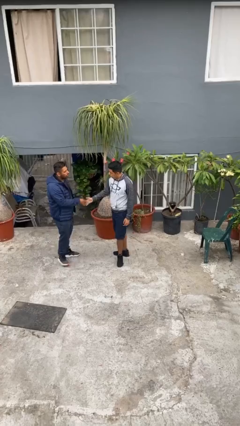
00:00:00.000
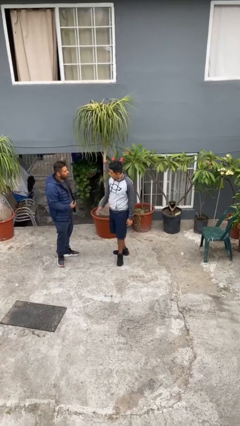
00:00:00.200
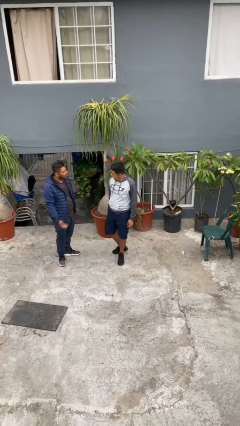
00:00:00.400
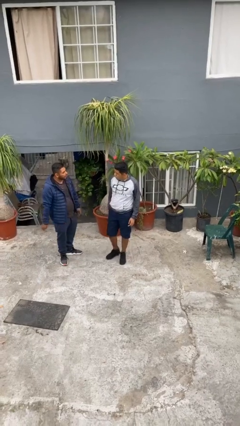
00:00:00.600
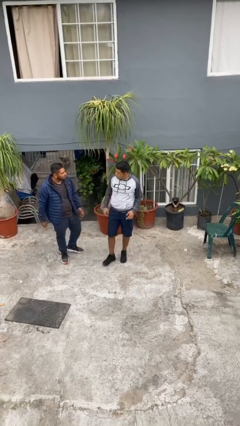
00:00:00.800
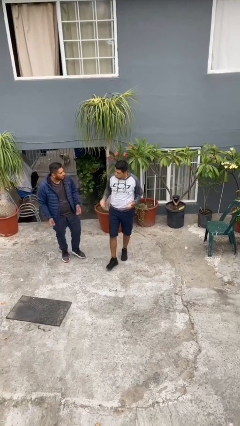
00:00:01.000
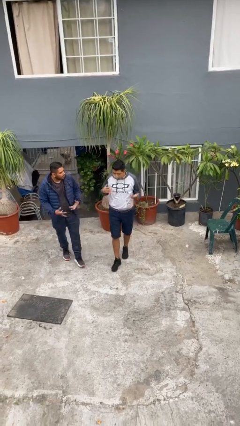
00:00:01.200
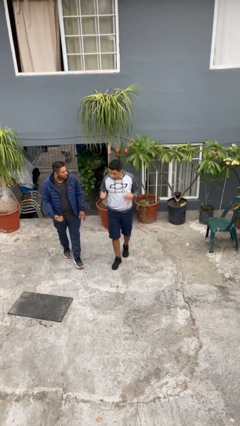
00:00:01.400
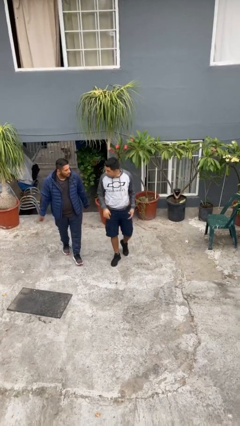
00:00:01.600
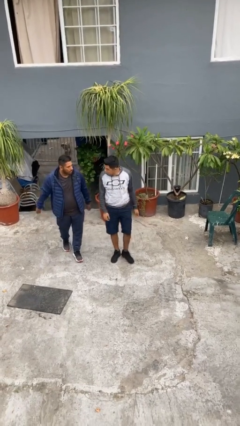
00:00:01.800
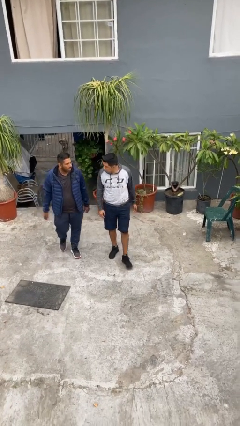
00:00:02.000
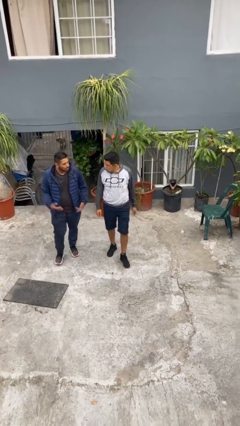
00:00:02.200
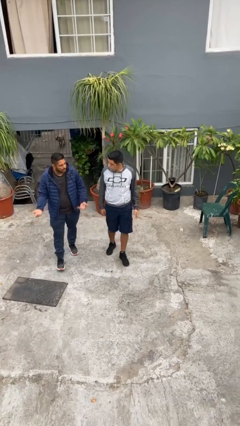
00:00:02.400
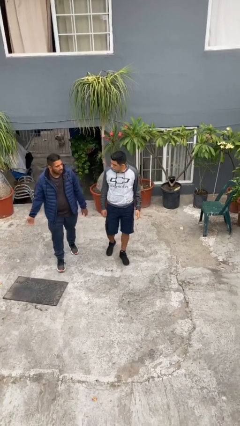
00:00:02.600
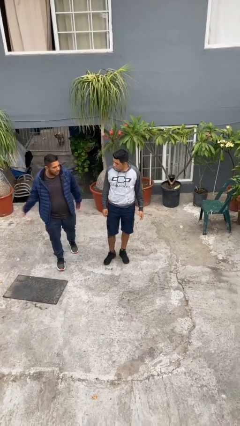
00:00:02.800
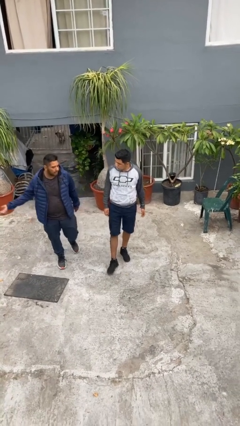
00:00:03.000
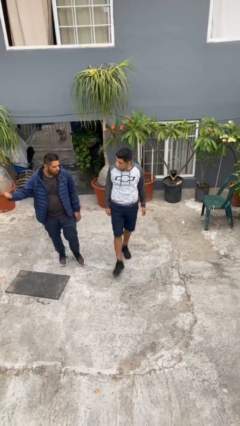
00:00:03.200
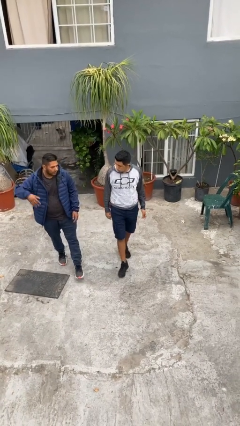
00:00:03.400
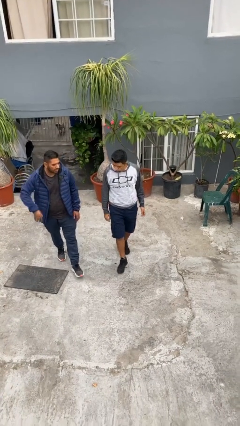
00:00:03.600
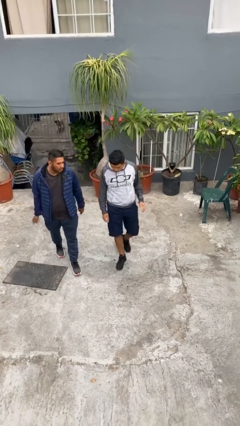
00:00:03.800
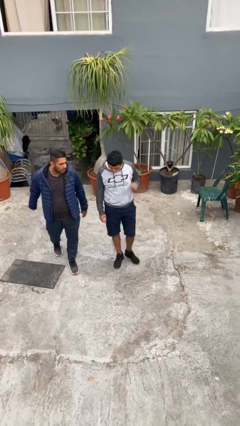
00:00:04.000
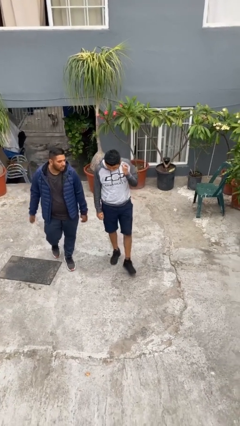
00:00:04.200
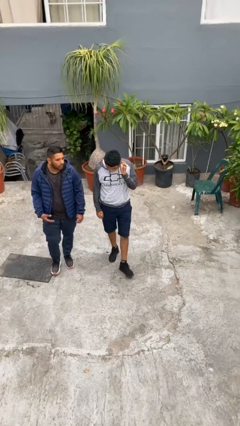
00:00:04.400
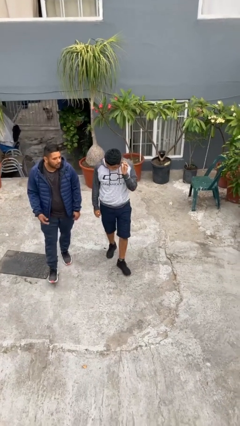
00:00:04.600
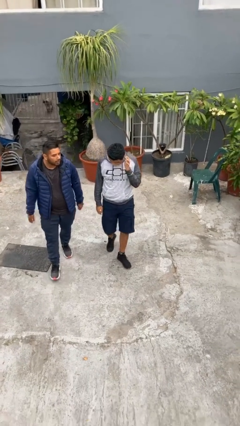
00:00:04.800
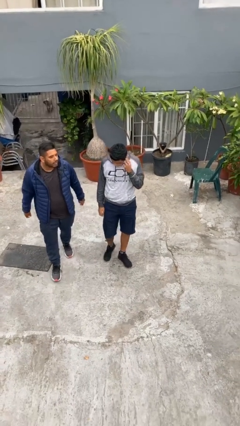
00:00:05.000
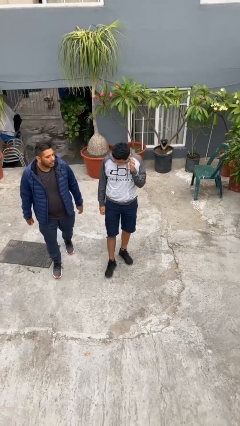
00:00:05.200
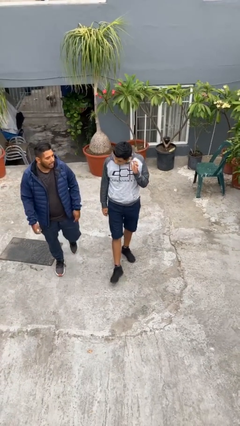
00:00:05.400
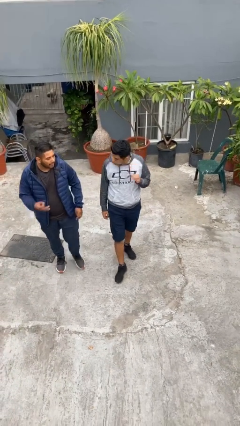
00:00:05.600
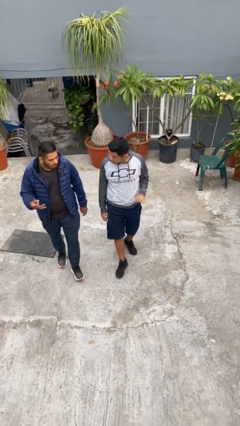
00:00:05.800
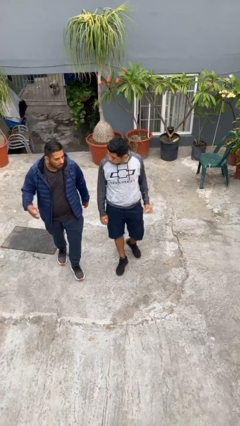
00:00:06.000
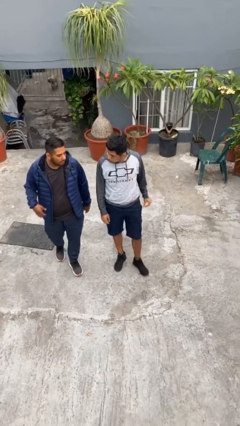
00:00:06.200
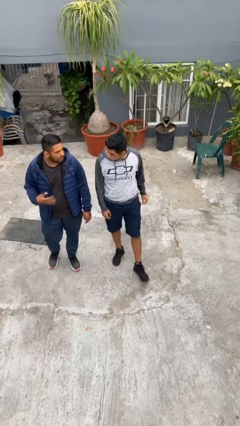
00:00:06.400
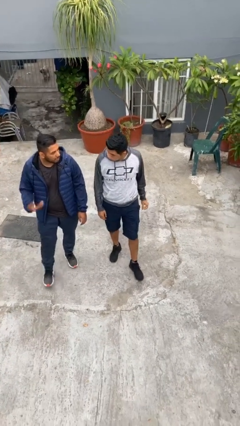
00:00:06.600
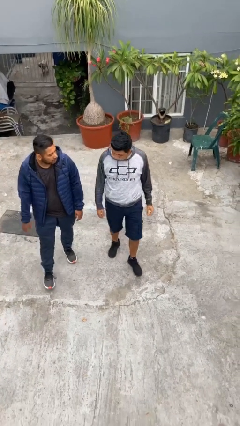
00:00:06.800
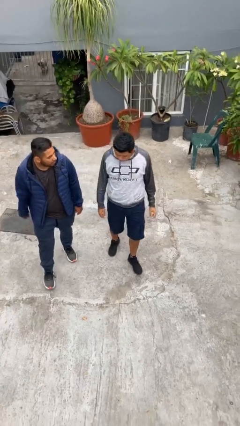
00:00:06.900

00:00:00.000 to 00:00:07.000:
person talks to person

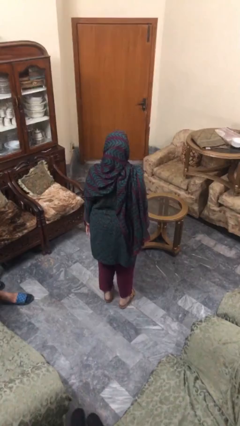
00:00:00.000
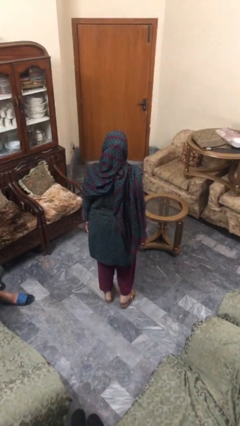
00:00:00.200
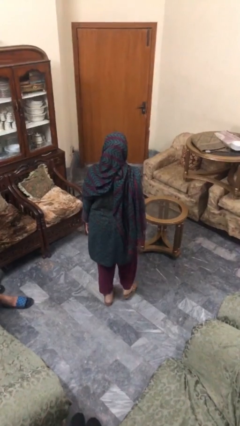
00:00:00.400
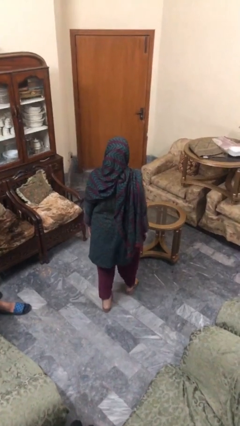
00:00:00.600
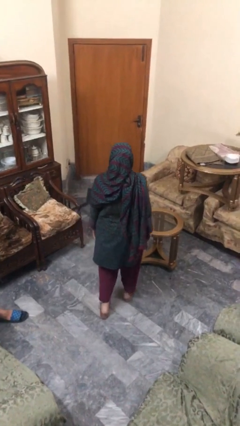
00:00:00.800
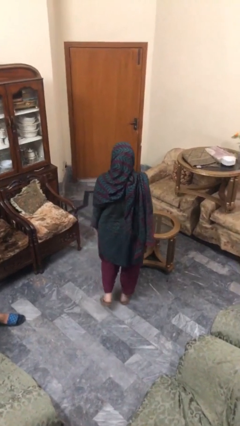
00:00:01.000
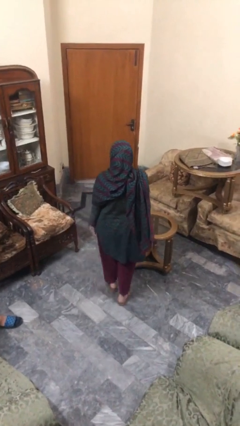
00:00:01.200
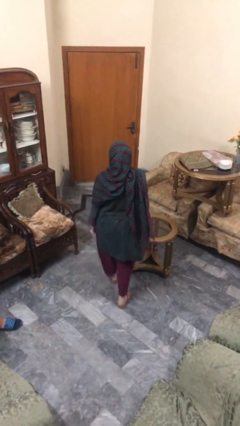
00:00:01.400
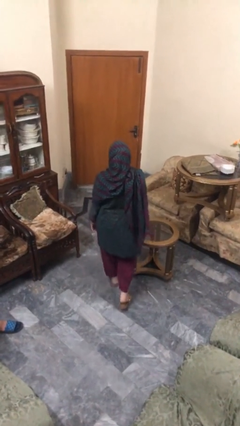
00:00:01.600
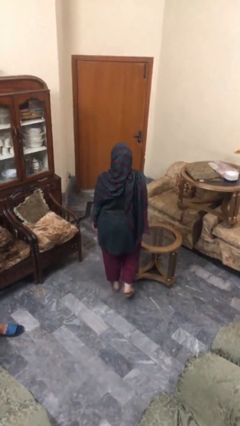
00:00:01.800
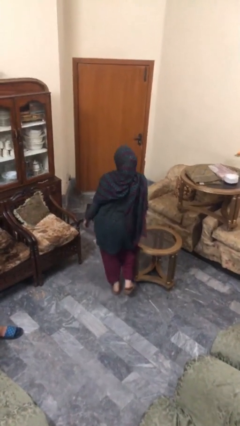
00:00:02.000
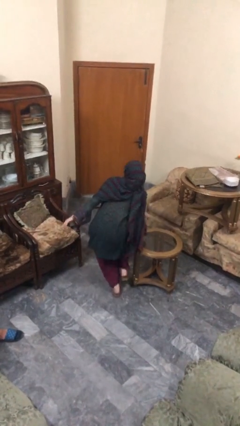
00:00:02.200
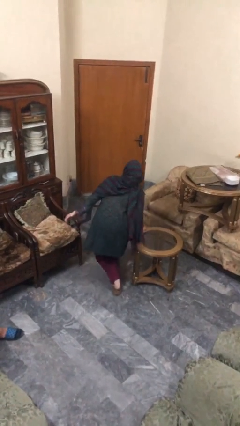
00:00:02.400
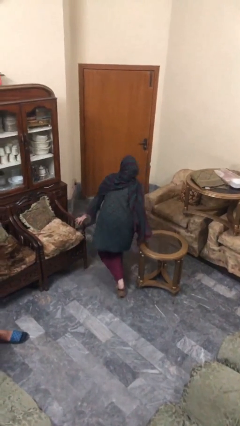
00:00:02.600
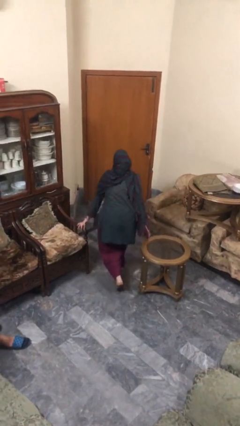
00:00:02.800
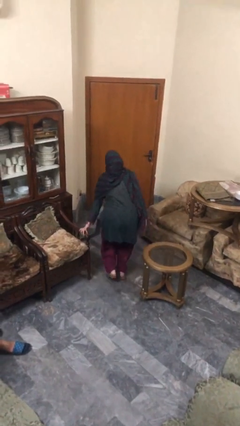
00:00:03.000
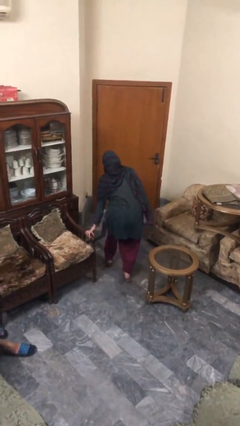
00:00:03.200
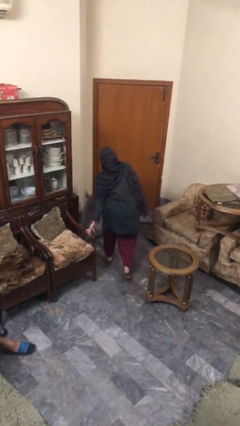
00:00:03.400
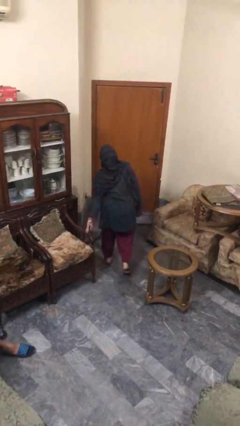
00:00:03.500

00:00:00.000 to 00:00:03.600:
person bumps into table

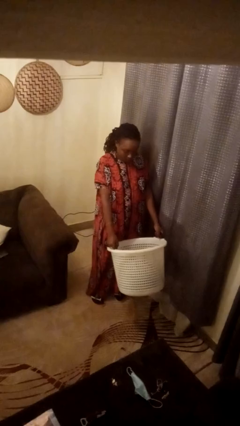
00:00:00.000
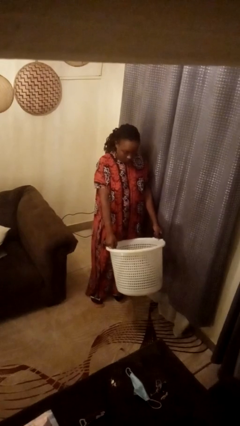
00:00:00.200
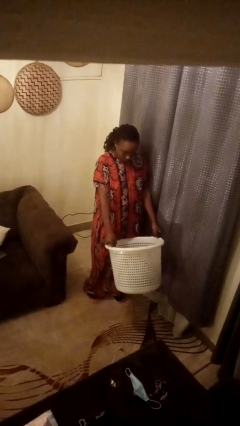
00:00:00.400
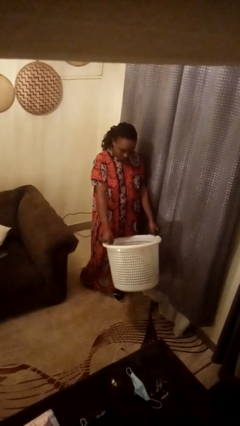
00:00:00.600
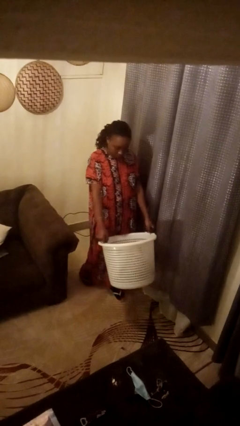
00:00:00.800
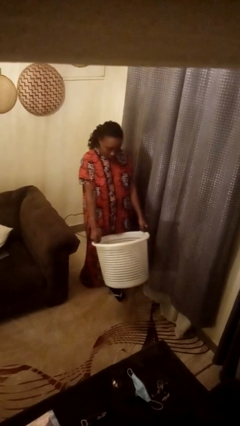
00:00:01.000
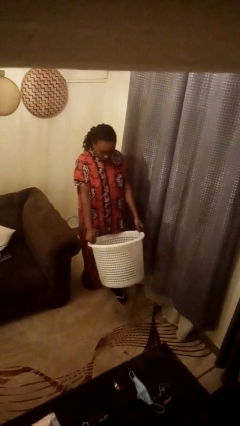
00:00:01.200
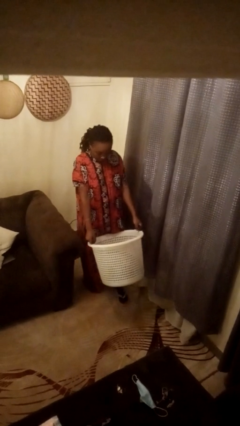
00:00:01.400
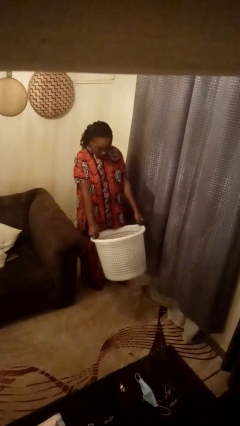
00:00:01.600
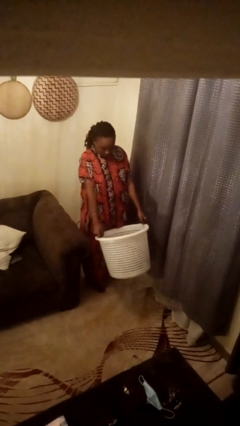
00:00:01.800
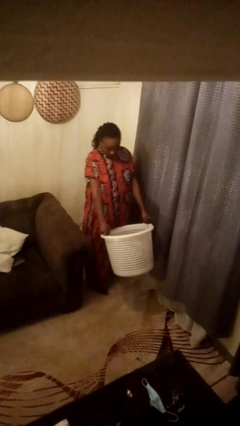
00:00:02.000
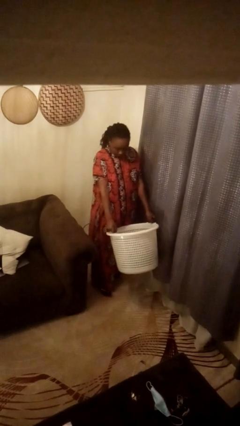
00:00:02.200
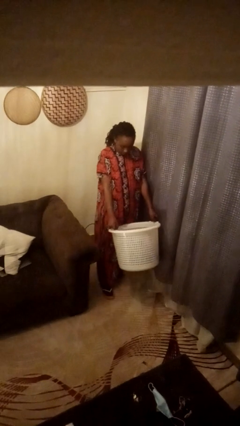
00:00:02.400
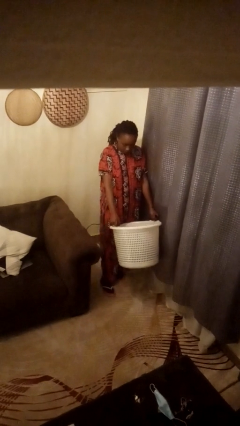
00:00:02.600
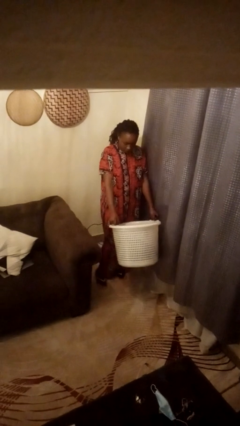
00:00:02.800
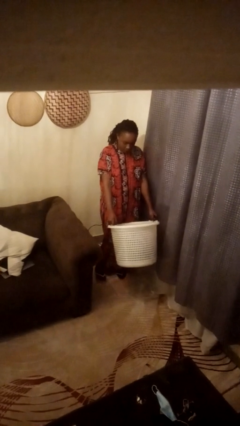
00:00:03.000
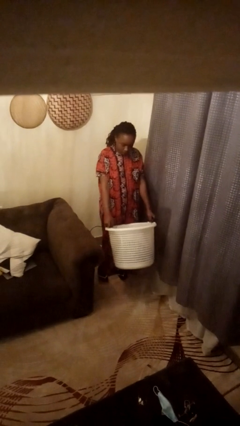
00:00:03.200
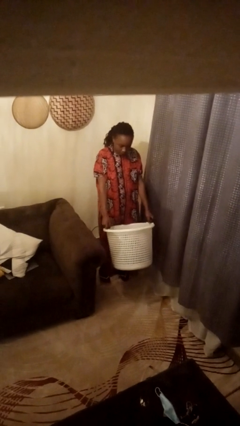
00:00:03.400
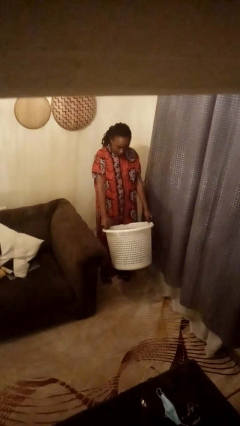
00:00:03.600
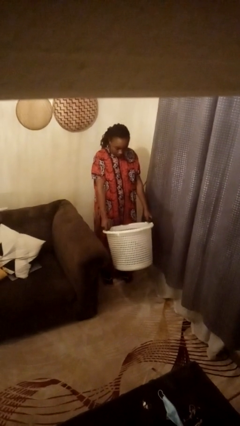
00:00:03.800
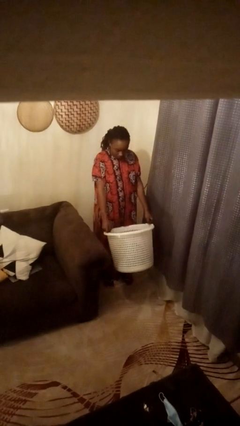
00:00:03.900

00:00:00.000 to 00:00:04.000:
person carries laundry basket

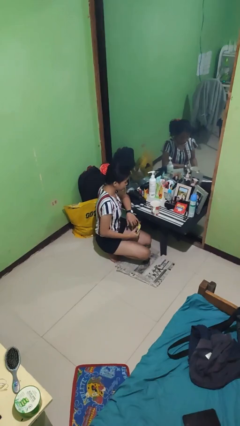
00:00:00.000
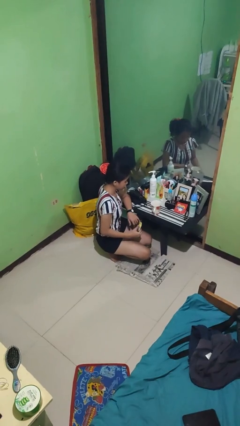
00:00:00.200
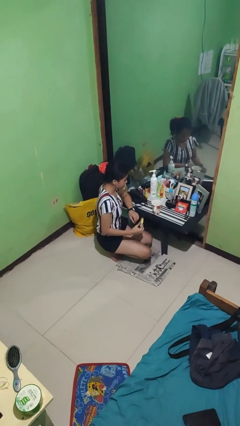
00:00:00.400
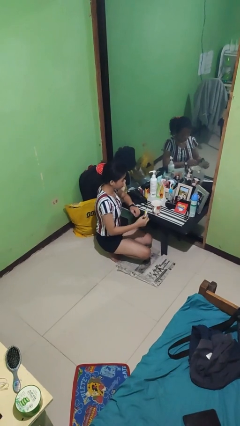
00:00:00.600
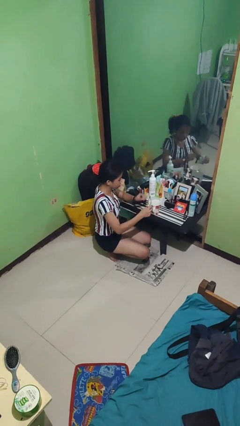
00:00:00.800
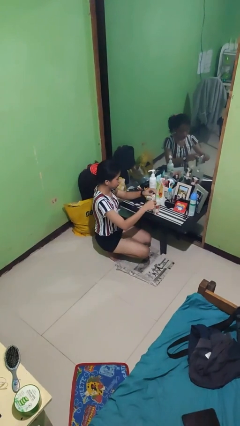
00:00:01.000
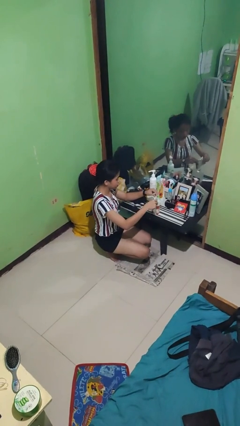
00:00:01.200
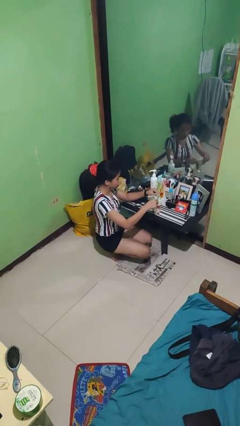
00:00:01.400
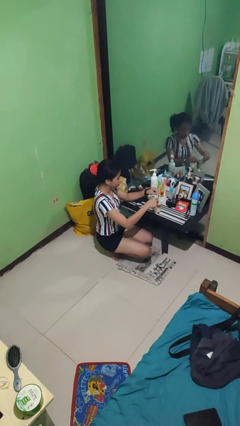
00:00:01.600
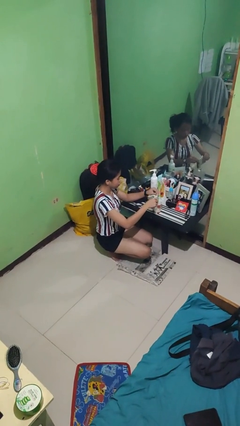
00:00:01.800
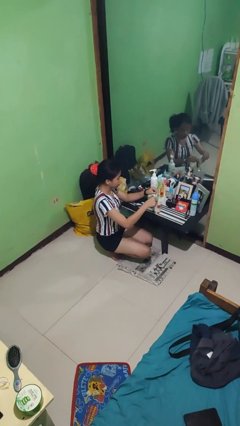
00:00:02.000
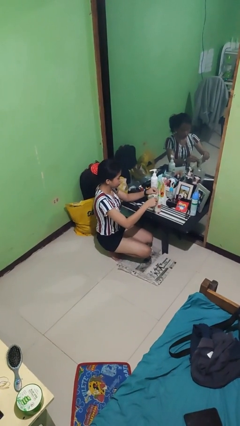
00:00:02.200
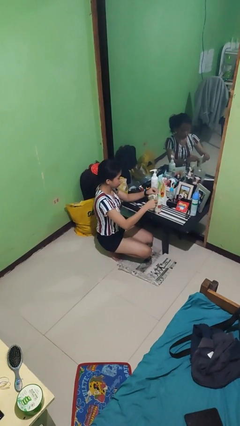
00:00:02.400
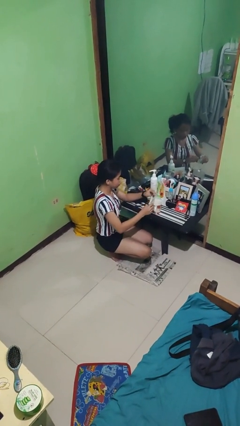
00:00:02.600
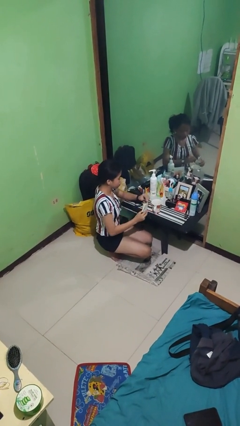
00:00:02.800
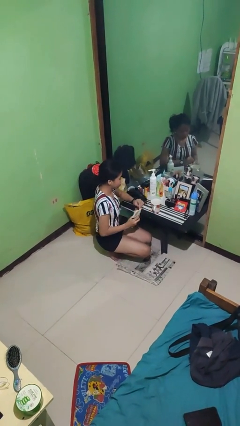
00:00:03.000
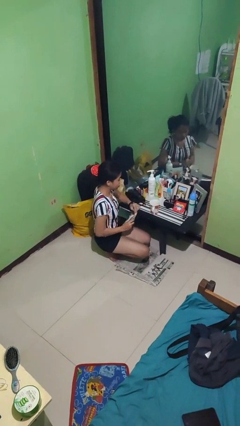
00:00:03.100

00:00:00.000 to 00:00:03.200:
person pours coffee into mug
